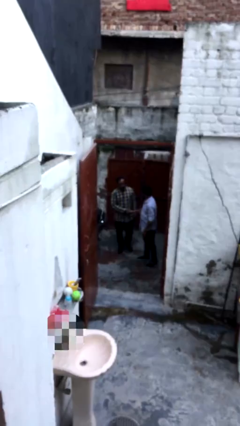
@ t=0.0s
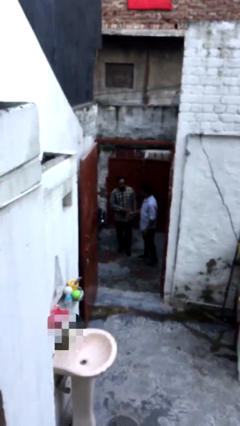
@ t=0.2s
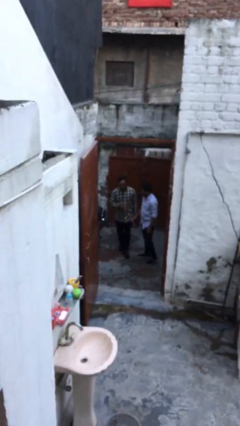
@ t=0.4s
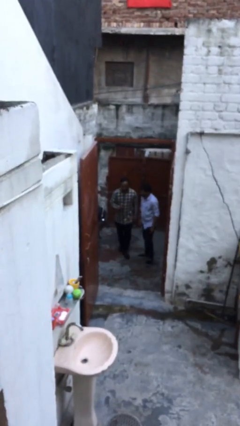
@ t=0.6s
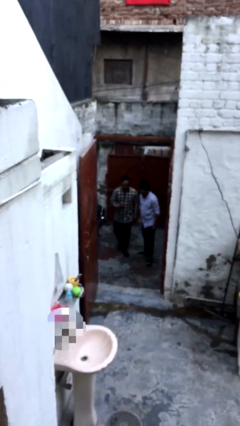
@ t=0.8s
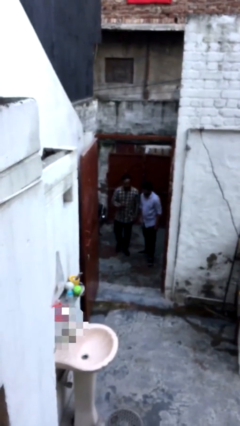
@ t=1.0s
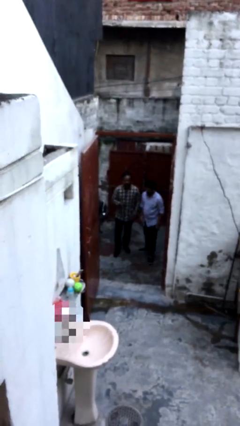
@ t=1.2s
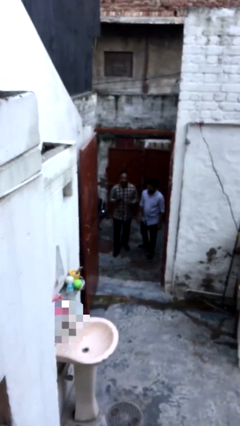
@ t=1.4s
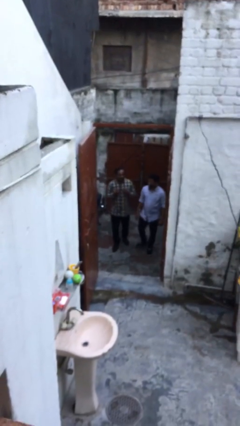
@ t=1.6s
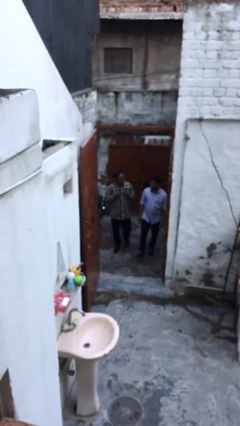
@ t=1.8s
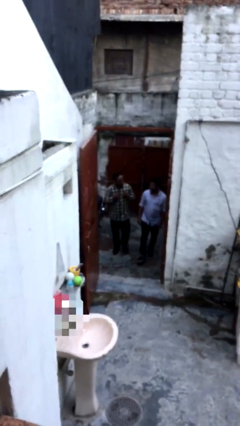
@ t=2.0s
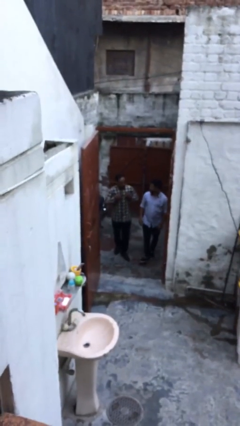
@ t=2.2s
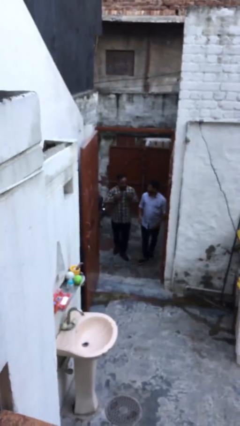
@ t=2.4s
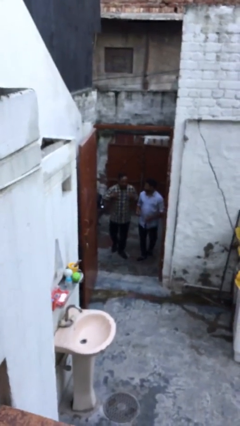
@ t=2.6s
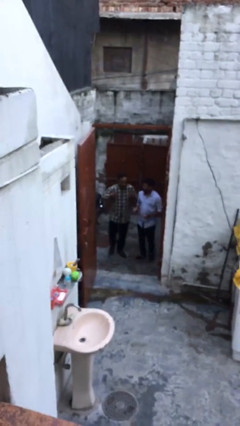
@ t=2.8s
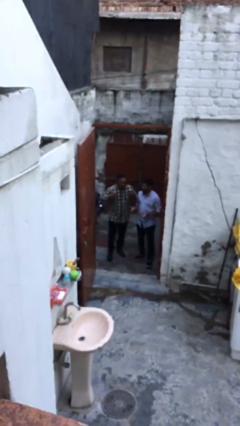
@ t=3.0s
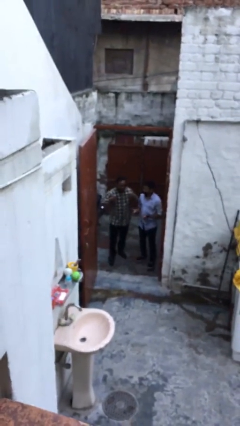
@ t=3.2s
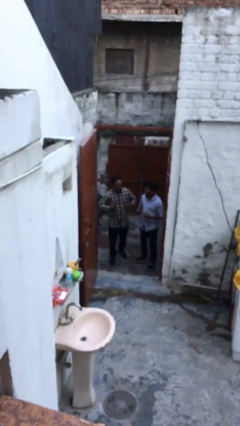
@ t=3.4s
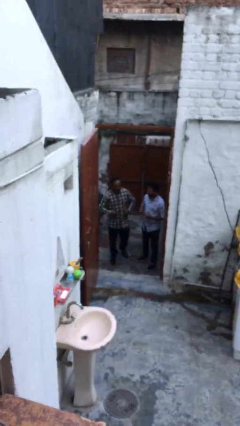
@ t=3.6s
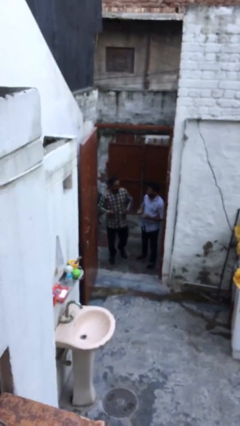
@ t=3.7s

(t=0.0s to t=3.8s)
person talks to person

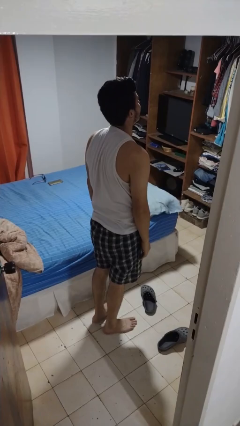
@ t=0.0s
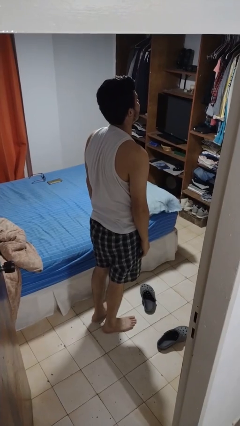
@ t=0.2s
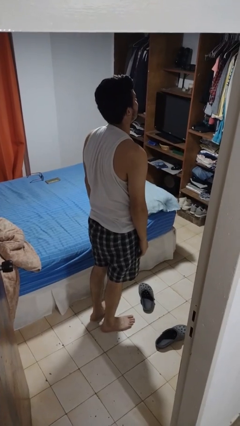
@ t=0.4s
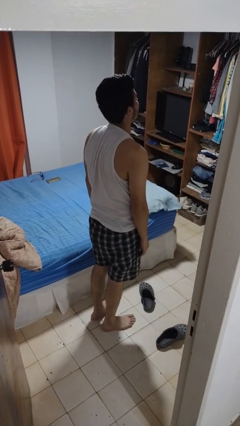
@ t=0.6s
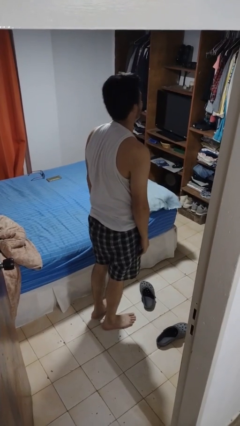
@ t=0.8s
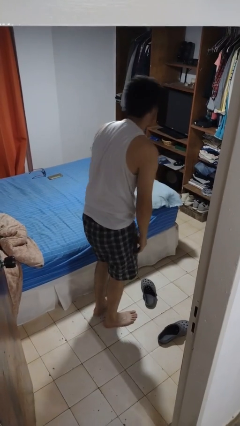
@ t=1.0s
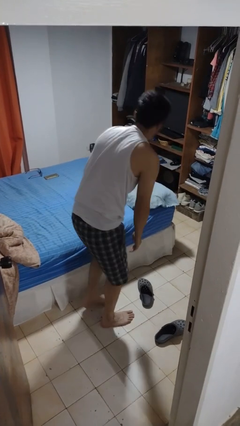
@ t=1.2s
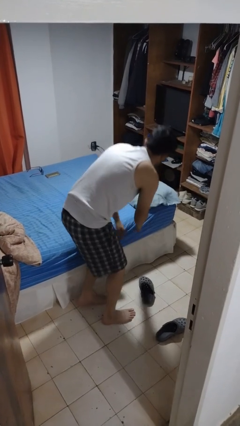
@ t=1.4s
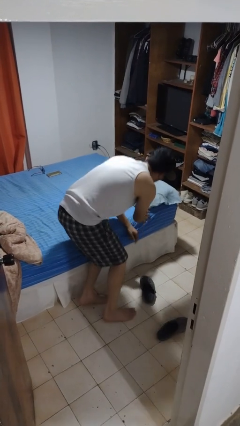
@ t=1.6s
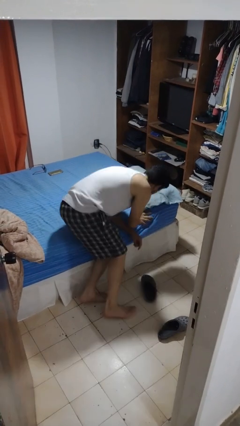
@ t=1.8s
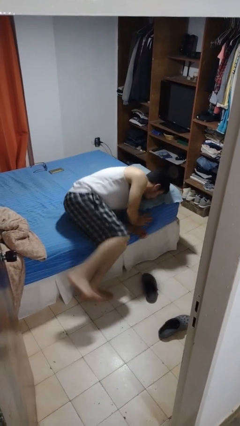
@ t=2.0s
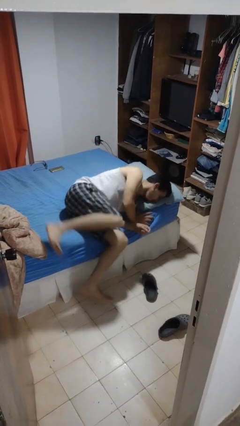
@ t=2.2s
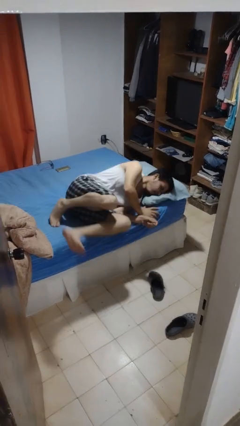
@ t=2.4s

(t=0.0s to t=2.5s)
person lies down on bed

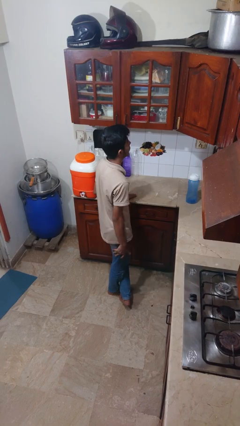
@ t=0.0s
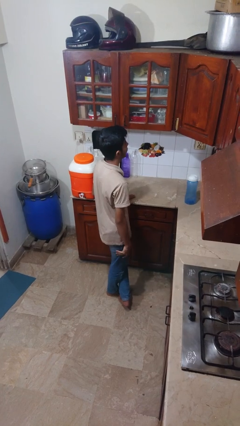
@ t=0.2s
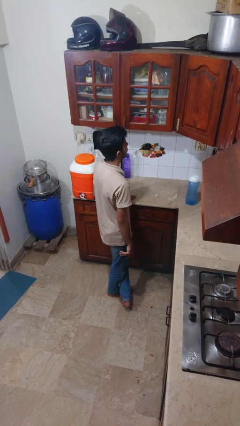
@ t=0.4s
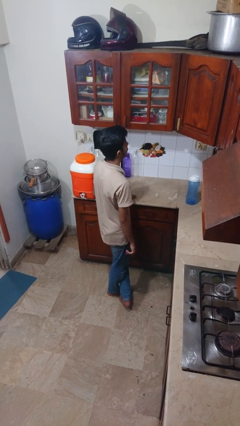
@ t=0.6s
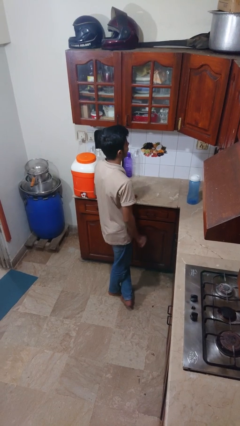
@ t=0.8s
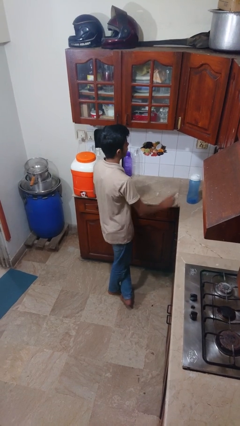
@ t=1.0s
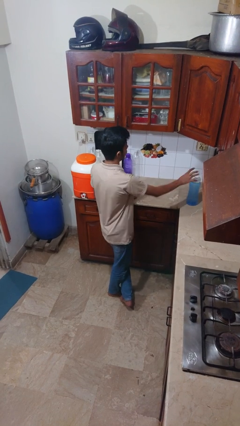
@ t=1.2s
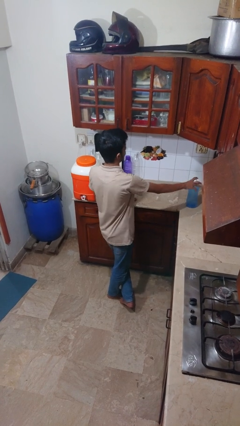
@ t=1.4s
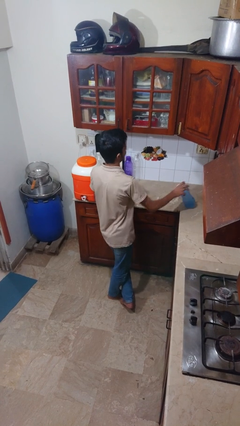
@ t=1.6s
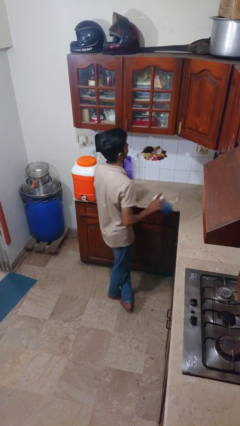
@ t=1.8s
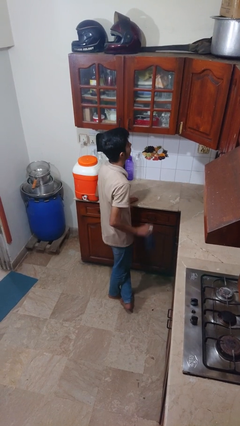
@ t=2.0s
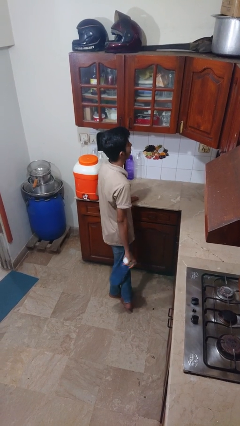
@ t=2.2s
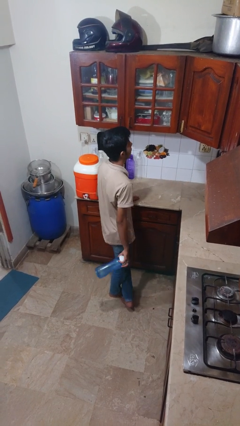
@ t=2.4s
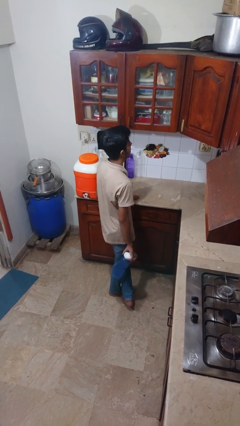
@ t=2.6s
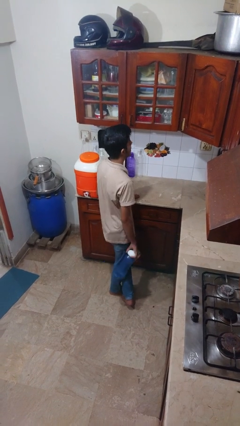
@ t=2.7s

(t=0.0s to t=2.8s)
person picks up object from countertop

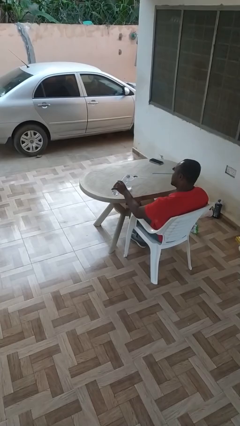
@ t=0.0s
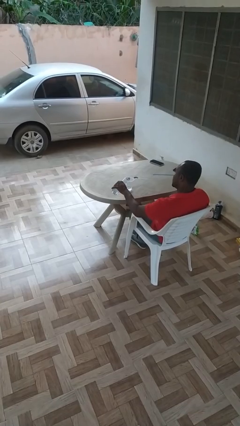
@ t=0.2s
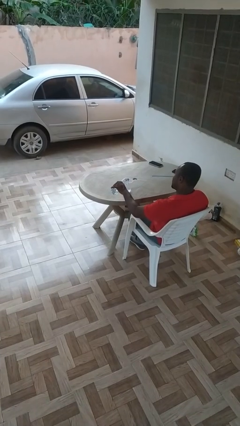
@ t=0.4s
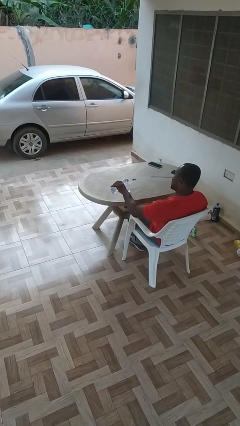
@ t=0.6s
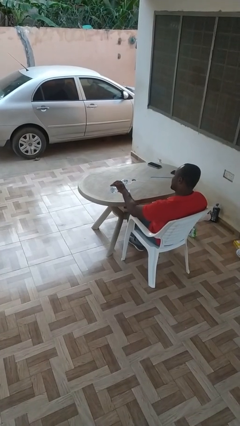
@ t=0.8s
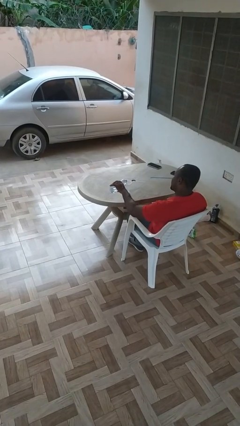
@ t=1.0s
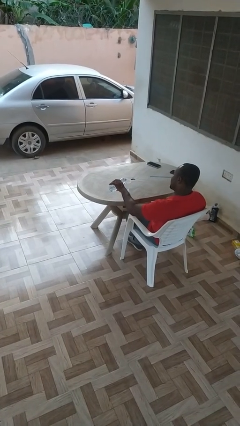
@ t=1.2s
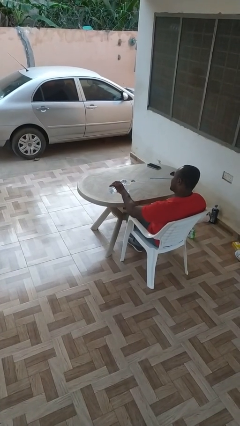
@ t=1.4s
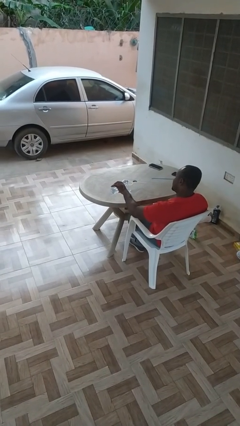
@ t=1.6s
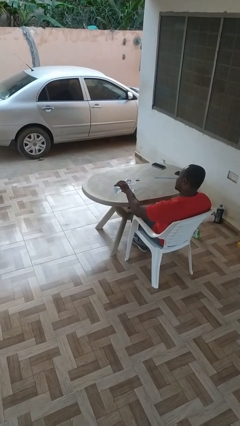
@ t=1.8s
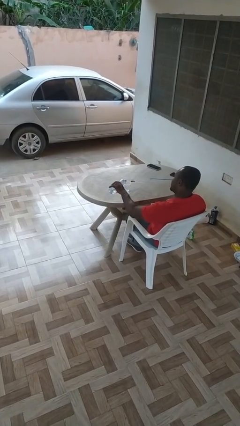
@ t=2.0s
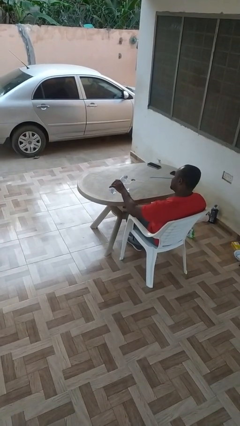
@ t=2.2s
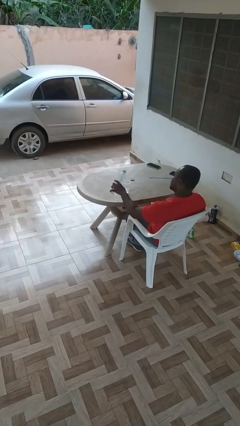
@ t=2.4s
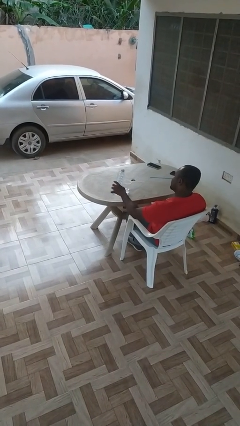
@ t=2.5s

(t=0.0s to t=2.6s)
person pours liquid into cup

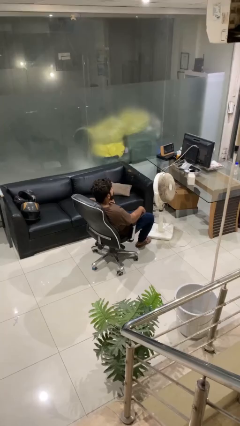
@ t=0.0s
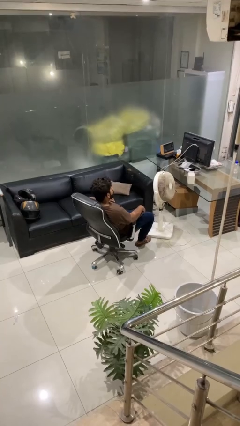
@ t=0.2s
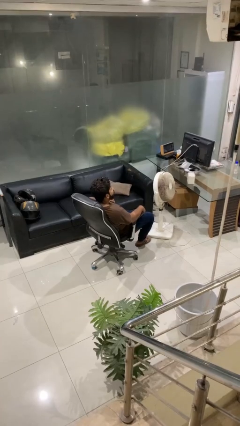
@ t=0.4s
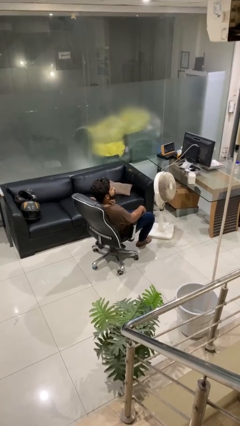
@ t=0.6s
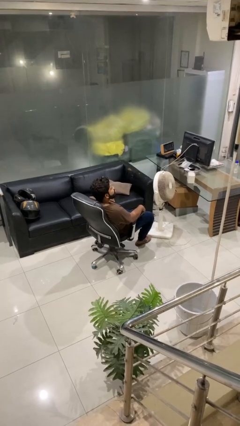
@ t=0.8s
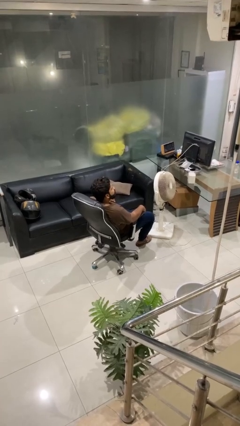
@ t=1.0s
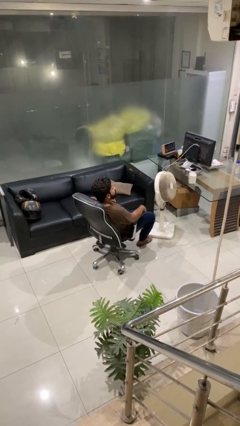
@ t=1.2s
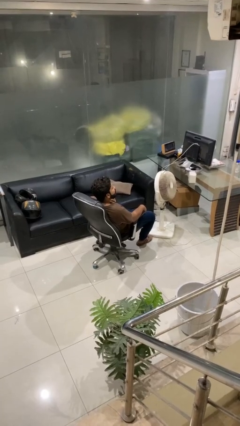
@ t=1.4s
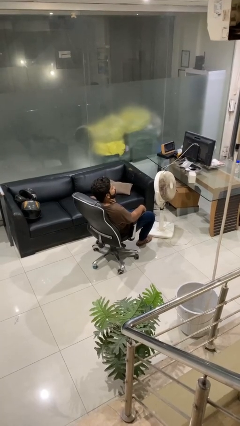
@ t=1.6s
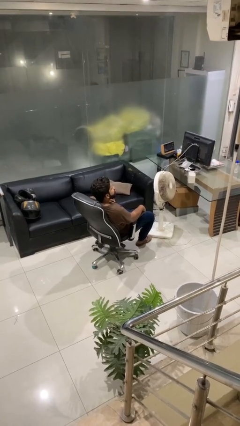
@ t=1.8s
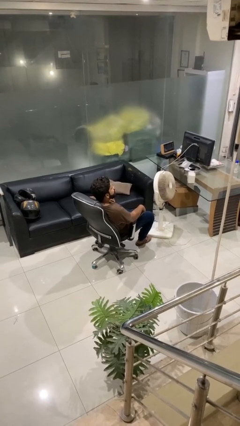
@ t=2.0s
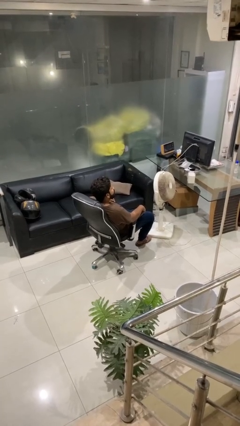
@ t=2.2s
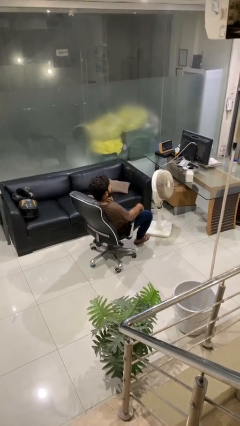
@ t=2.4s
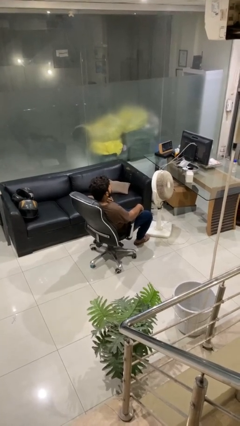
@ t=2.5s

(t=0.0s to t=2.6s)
person sticks out tongue

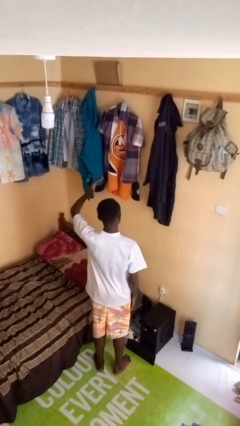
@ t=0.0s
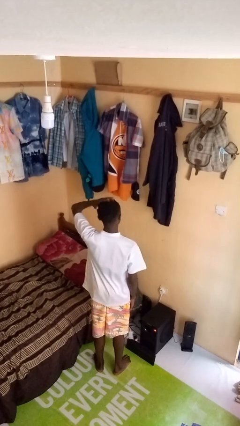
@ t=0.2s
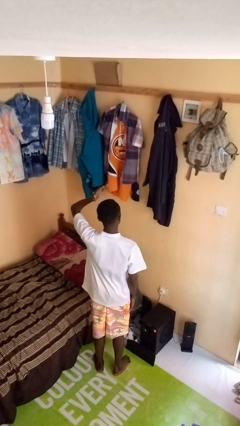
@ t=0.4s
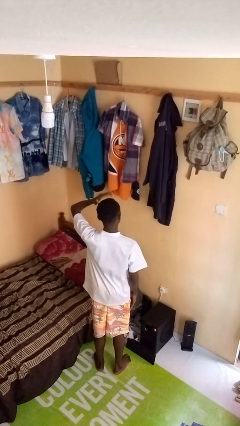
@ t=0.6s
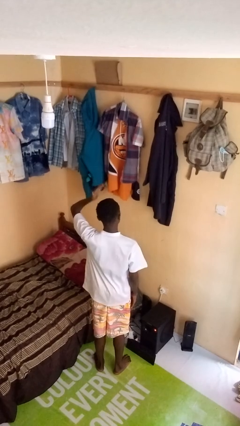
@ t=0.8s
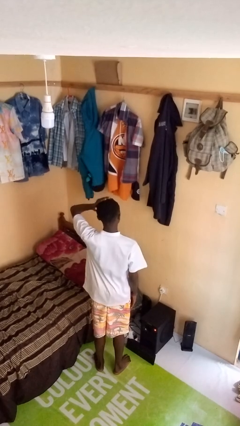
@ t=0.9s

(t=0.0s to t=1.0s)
person pats head

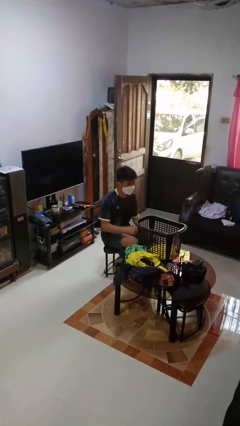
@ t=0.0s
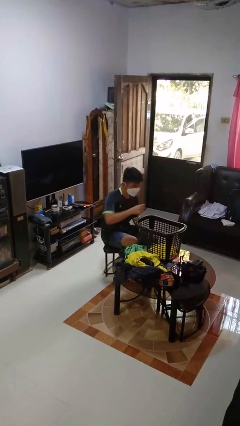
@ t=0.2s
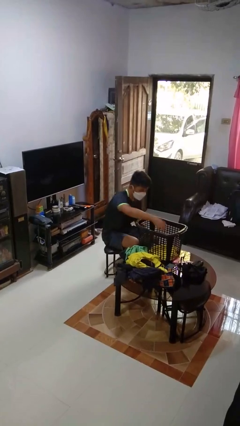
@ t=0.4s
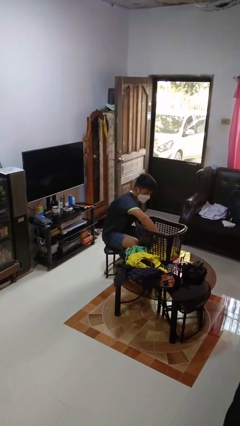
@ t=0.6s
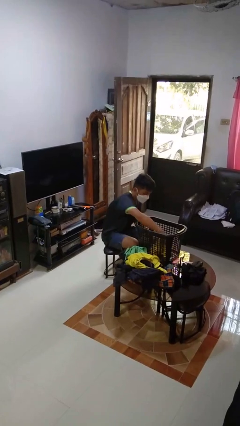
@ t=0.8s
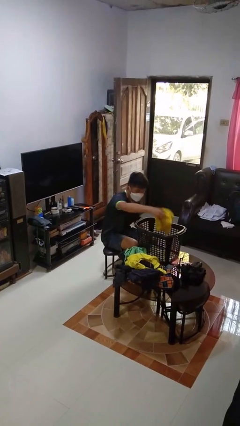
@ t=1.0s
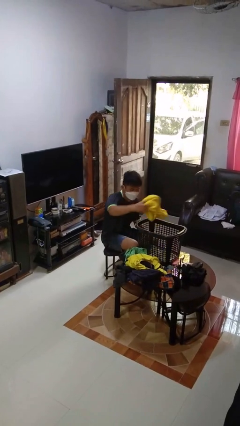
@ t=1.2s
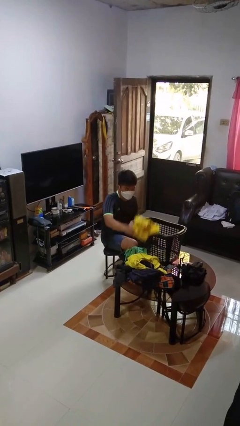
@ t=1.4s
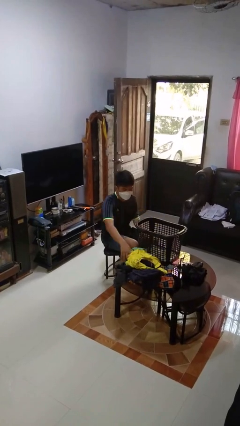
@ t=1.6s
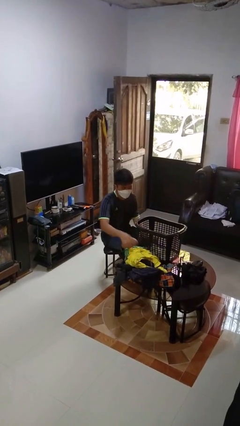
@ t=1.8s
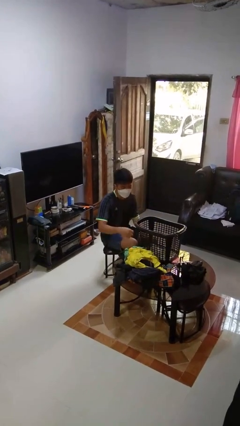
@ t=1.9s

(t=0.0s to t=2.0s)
person takes object from basket
